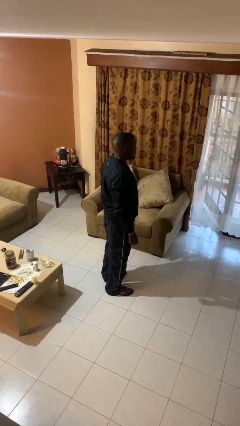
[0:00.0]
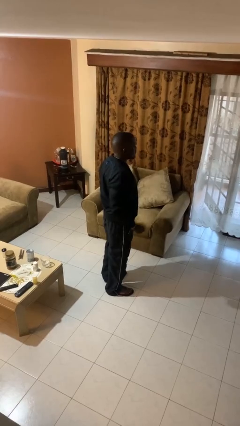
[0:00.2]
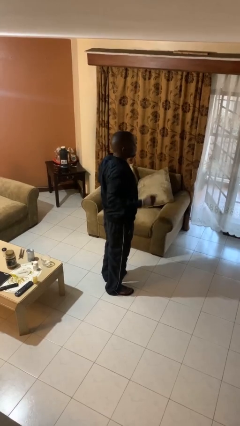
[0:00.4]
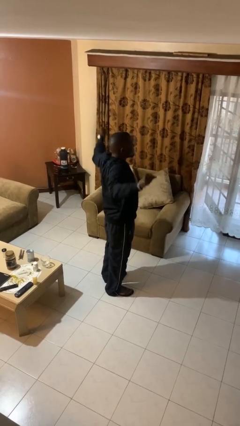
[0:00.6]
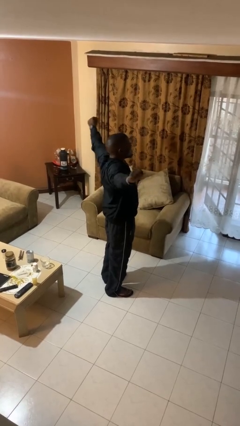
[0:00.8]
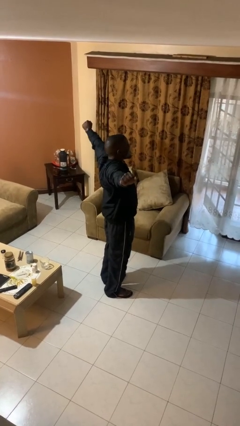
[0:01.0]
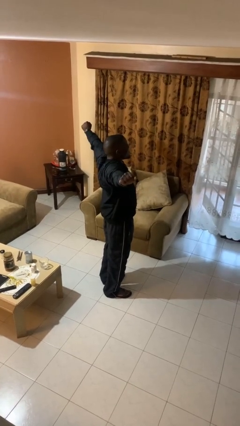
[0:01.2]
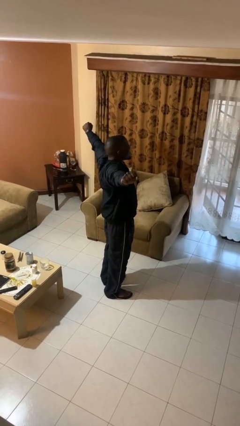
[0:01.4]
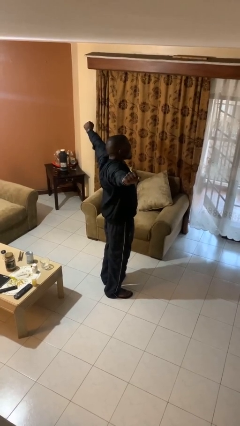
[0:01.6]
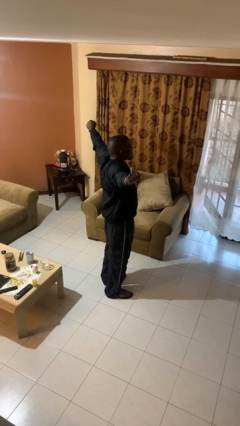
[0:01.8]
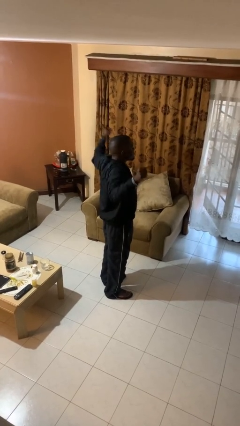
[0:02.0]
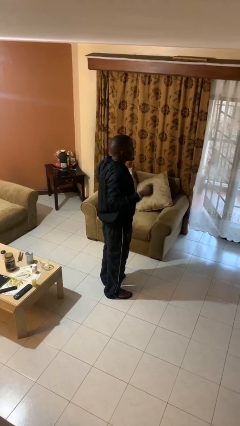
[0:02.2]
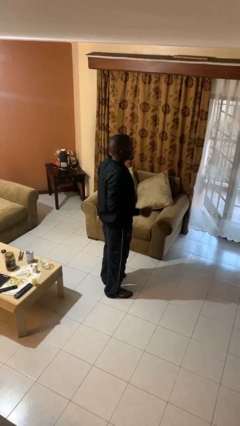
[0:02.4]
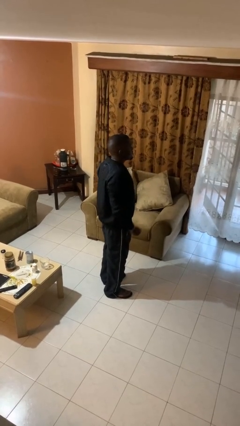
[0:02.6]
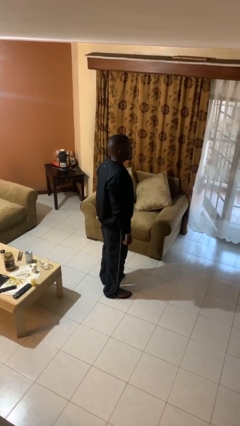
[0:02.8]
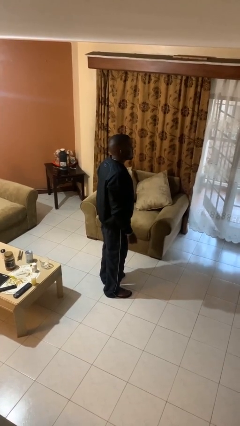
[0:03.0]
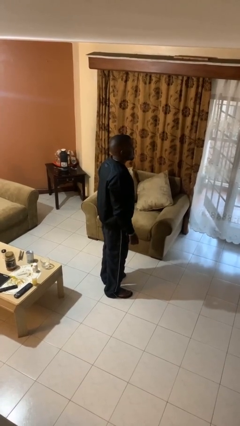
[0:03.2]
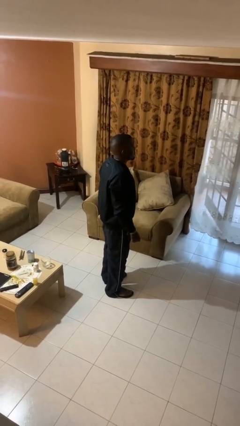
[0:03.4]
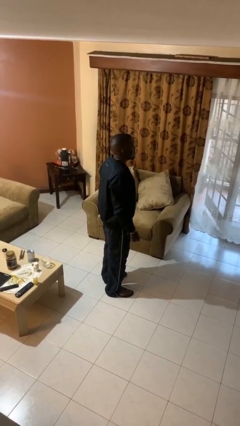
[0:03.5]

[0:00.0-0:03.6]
person stretches arms to side

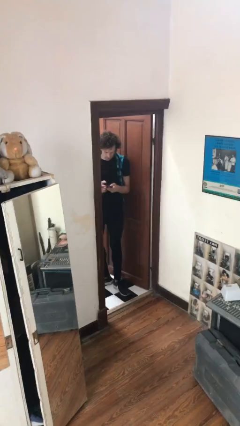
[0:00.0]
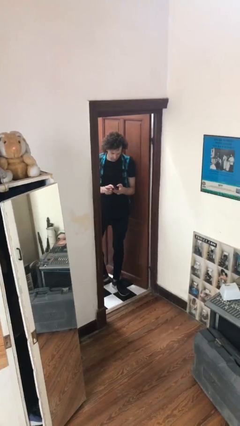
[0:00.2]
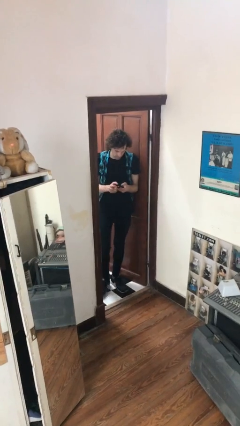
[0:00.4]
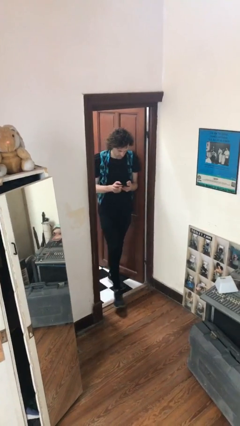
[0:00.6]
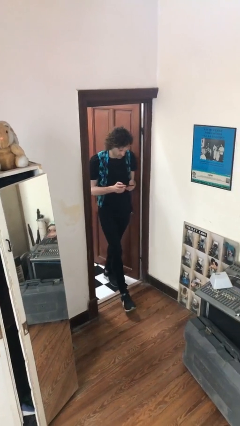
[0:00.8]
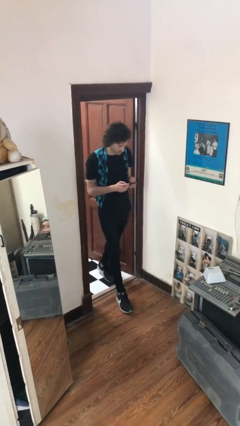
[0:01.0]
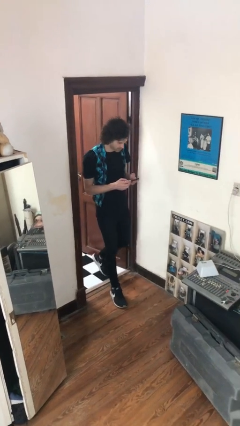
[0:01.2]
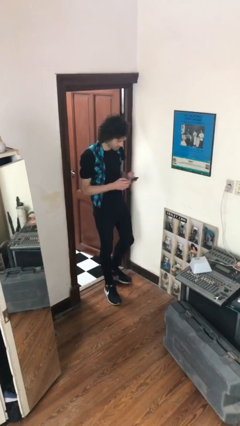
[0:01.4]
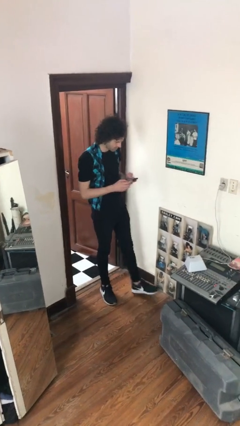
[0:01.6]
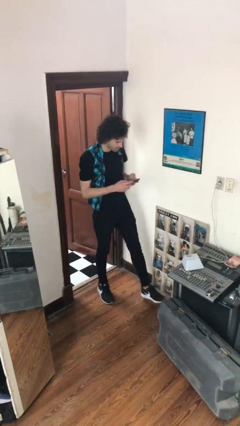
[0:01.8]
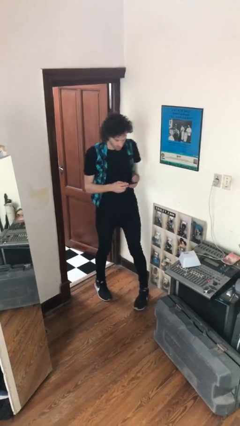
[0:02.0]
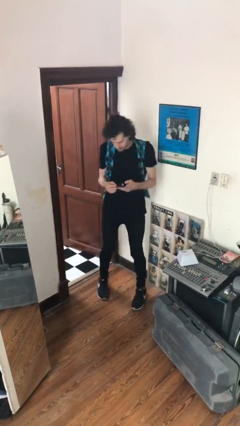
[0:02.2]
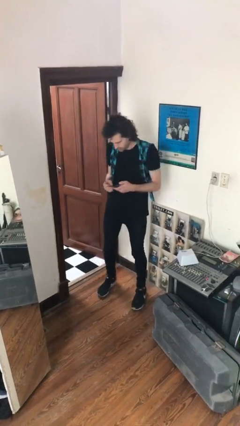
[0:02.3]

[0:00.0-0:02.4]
person enters scene through structure

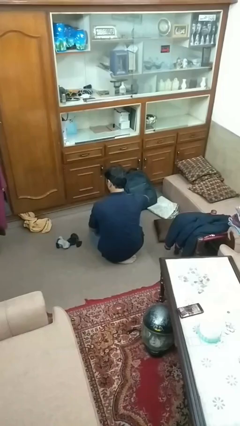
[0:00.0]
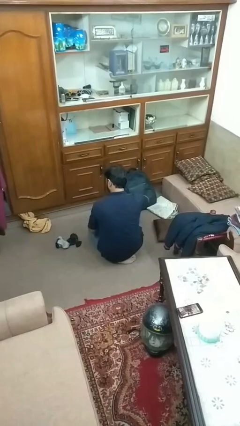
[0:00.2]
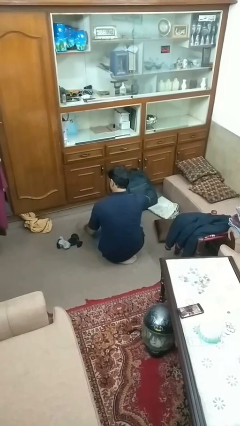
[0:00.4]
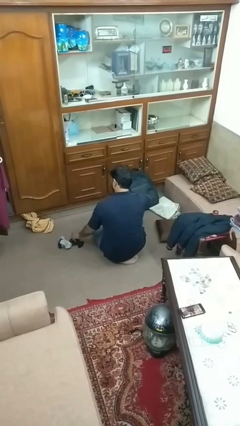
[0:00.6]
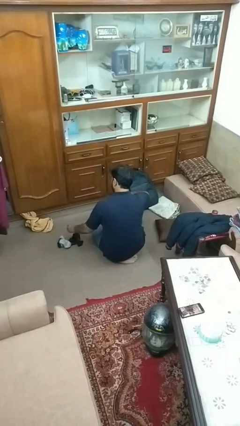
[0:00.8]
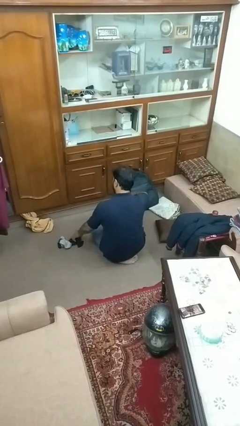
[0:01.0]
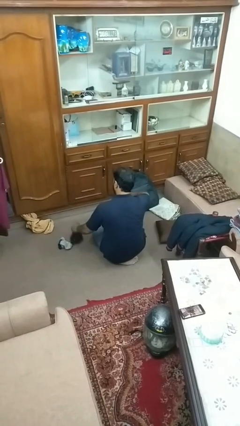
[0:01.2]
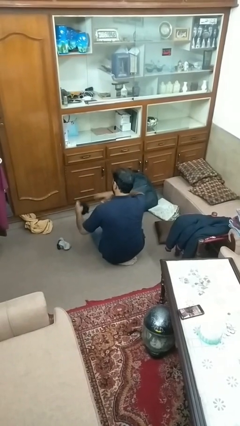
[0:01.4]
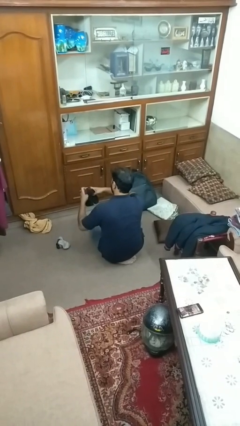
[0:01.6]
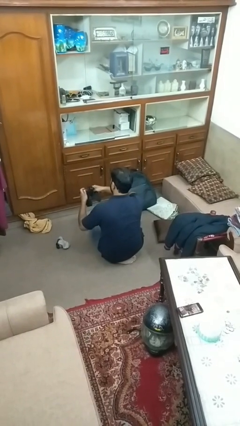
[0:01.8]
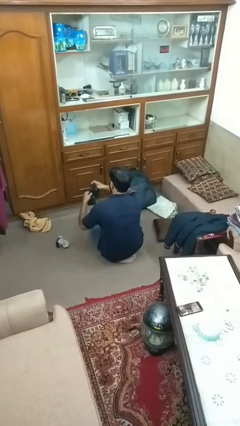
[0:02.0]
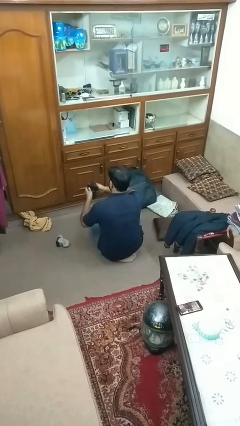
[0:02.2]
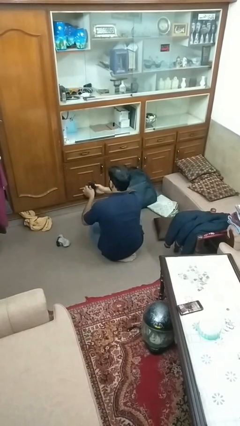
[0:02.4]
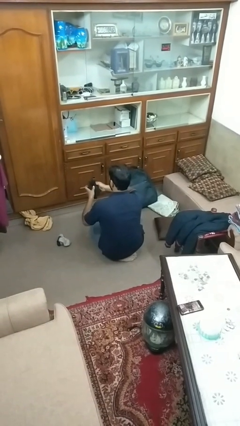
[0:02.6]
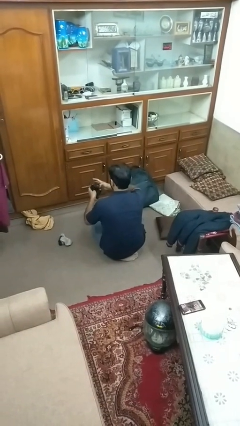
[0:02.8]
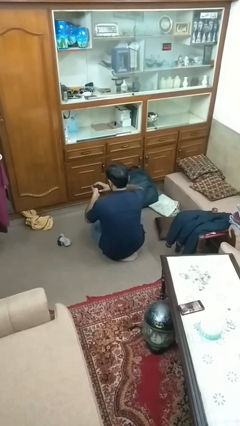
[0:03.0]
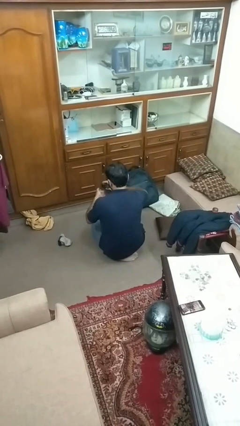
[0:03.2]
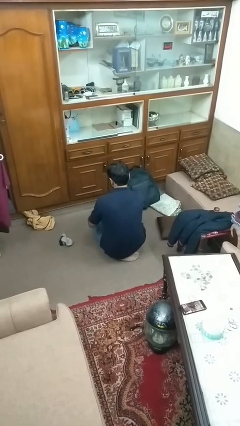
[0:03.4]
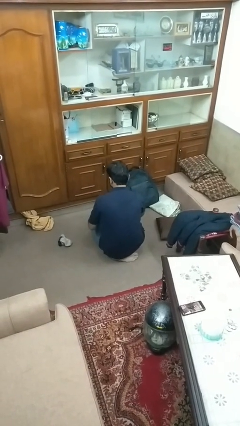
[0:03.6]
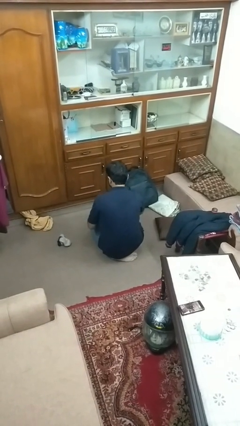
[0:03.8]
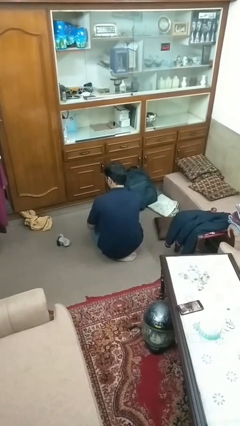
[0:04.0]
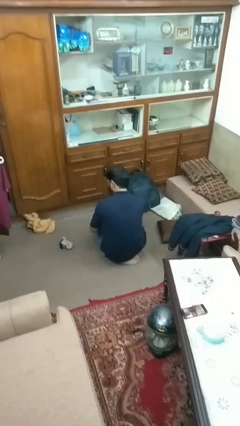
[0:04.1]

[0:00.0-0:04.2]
person folds socks

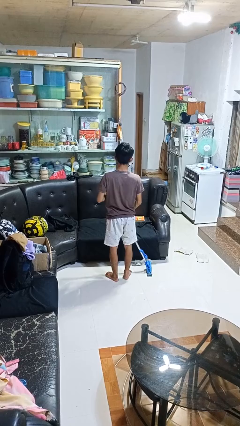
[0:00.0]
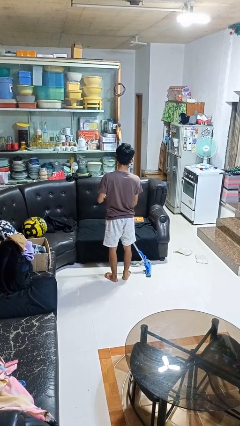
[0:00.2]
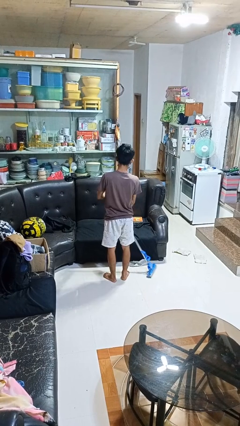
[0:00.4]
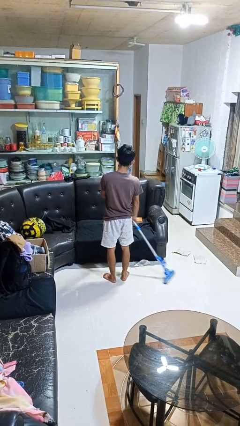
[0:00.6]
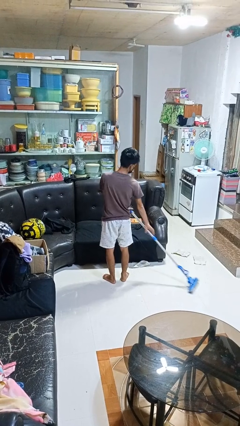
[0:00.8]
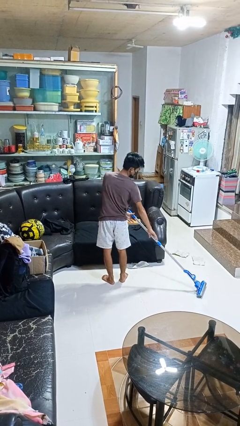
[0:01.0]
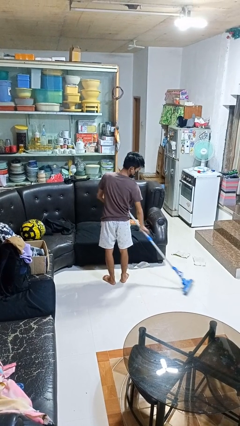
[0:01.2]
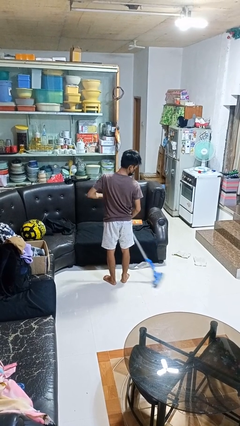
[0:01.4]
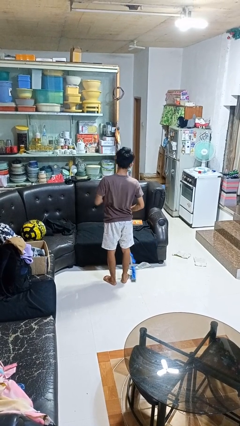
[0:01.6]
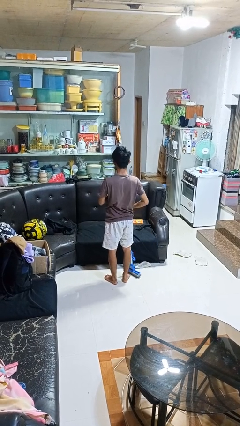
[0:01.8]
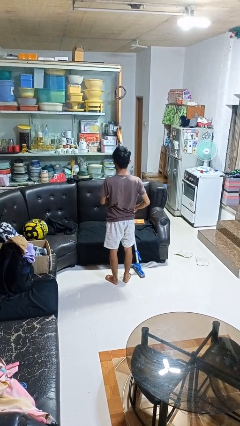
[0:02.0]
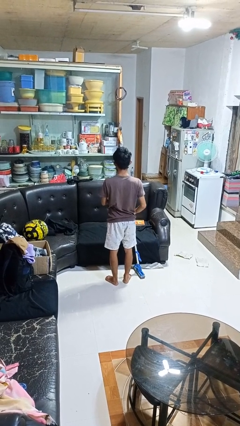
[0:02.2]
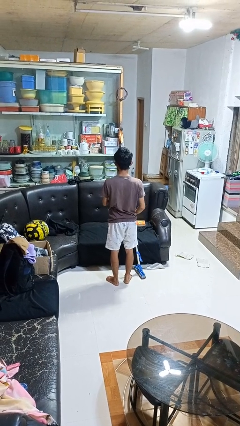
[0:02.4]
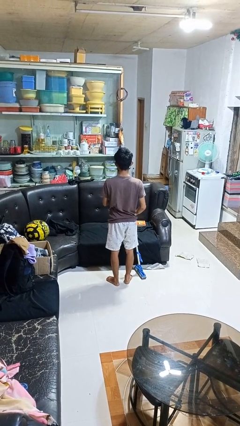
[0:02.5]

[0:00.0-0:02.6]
person mops

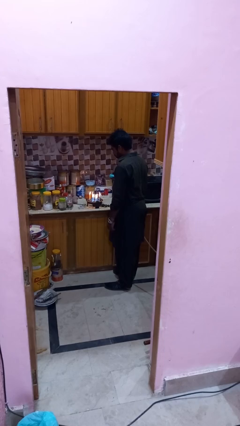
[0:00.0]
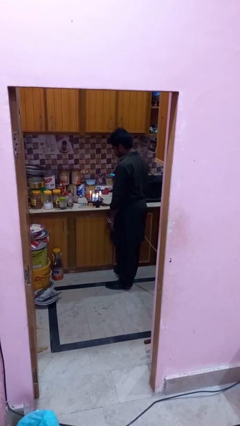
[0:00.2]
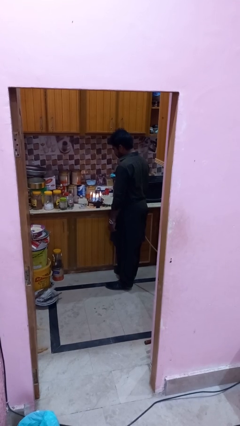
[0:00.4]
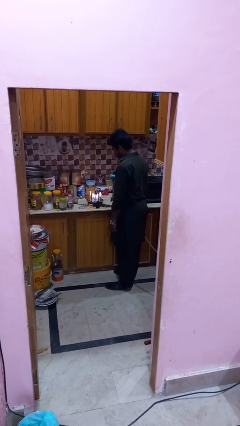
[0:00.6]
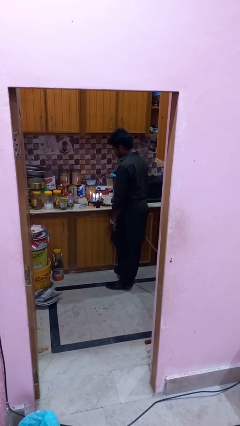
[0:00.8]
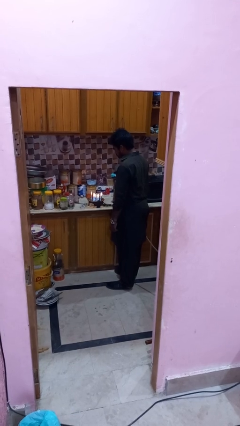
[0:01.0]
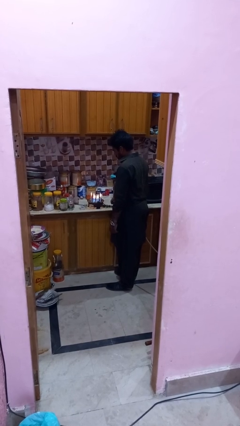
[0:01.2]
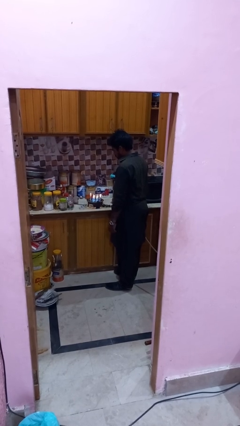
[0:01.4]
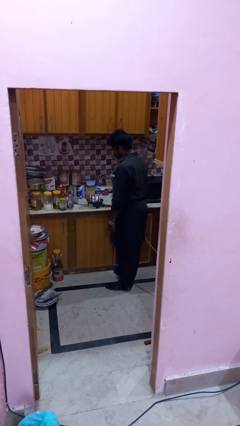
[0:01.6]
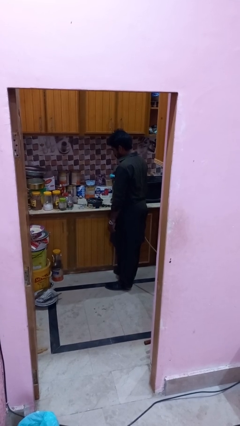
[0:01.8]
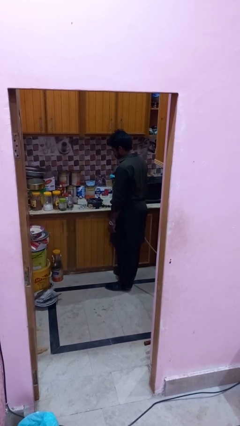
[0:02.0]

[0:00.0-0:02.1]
person turns off stovetop

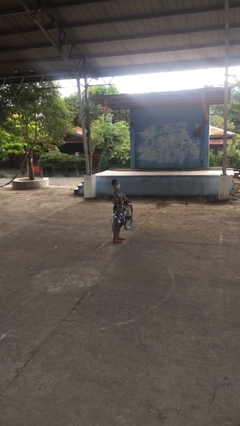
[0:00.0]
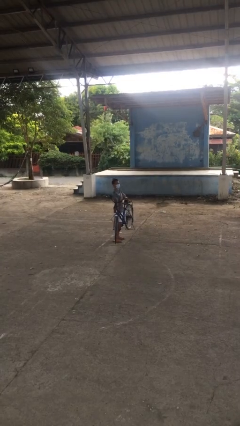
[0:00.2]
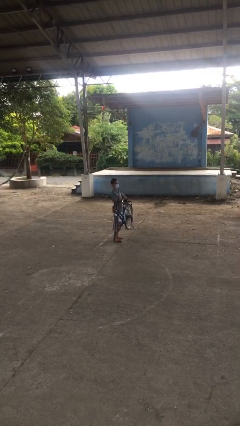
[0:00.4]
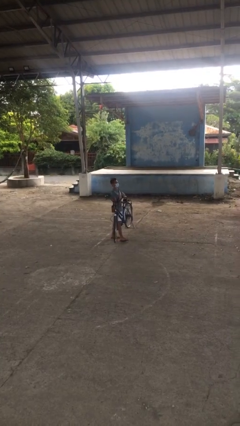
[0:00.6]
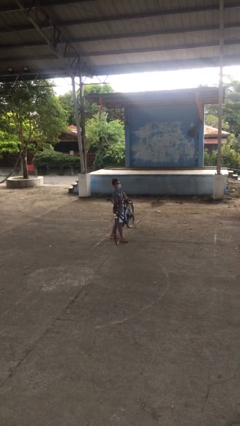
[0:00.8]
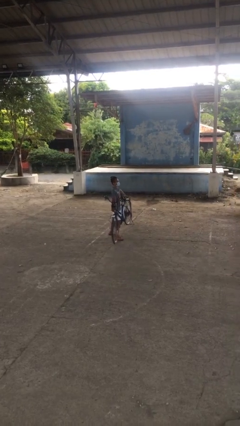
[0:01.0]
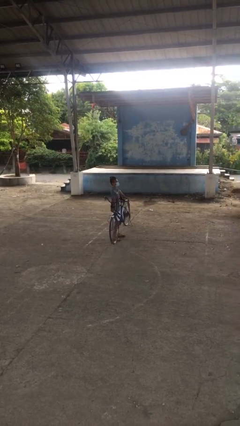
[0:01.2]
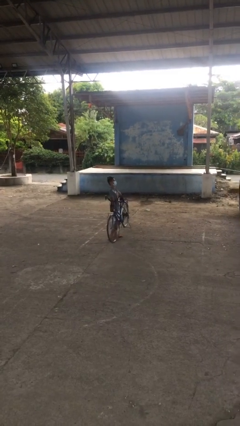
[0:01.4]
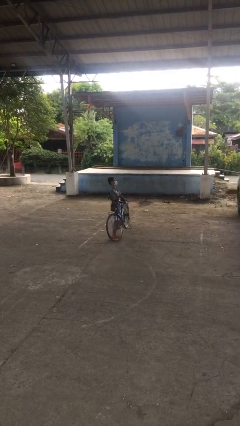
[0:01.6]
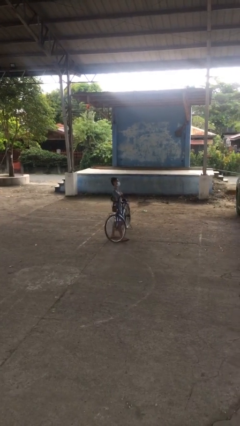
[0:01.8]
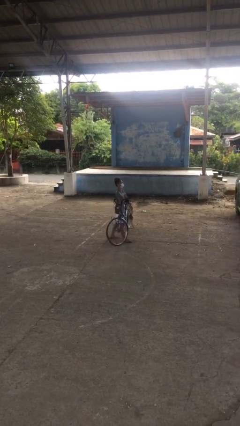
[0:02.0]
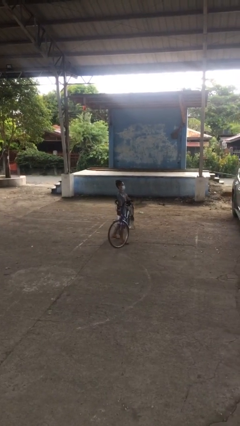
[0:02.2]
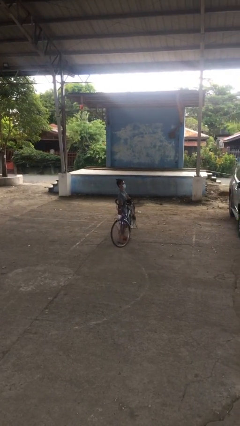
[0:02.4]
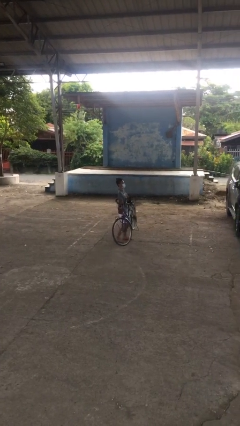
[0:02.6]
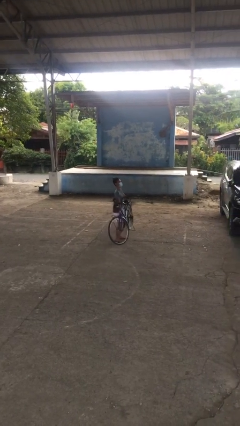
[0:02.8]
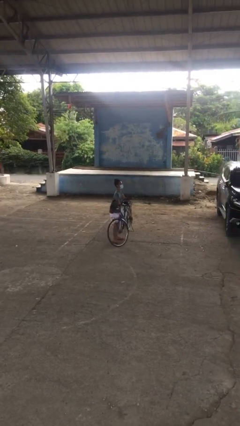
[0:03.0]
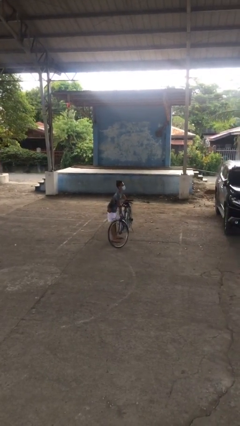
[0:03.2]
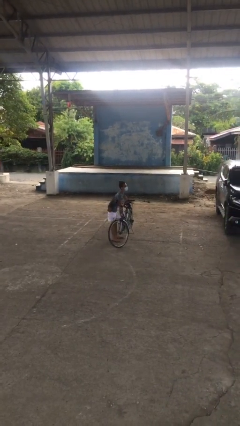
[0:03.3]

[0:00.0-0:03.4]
person carries heavy object
